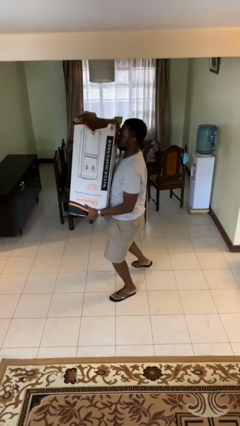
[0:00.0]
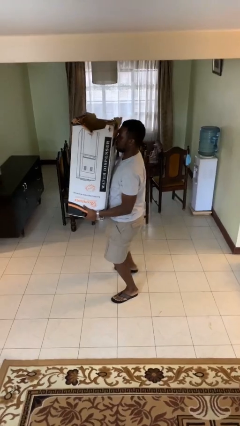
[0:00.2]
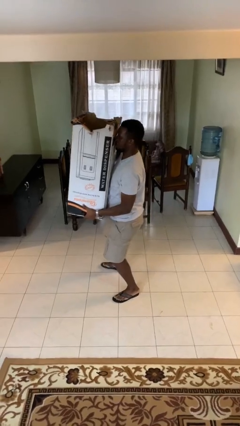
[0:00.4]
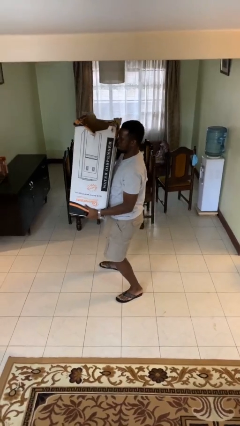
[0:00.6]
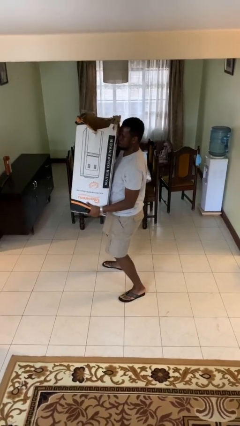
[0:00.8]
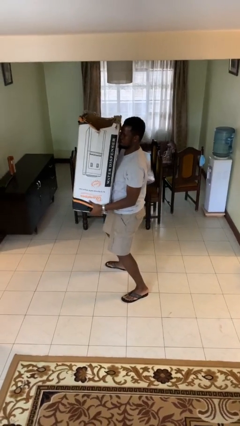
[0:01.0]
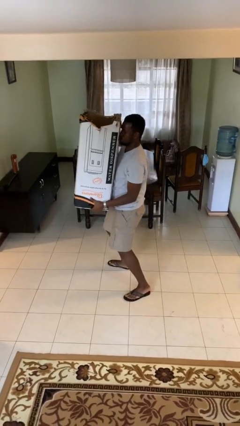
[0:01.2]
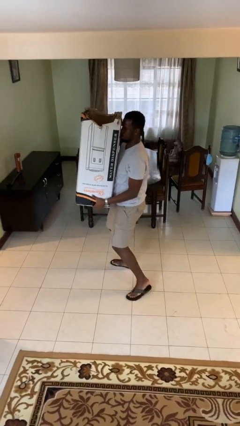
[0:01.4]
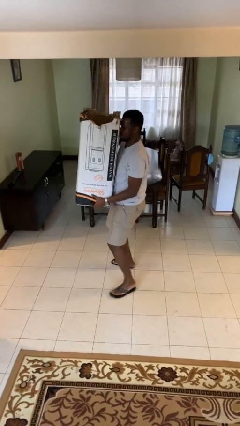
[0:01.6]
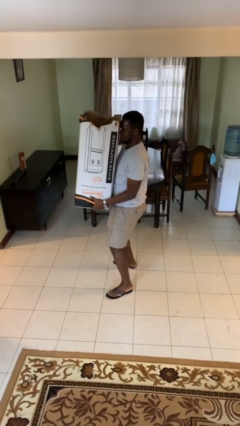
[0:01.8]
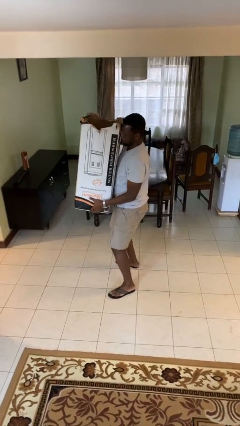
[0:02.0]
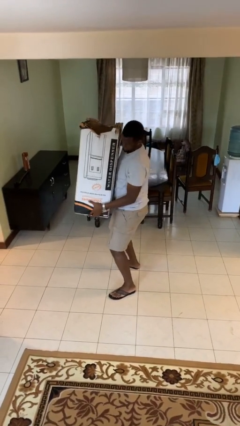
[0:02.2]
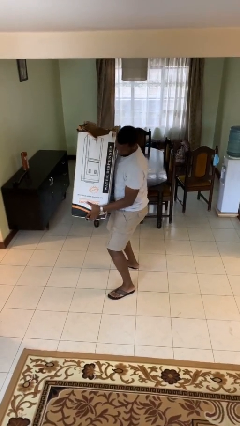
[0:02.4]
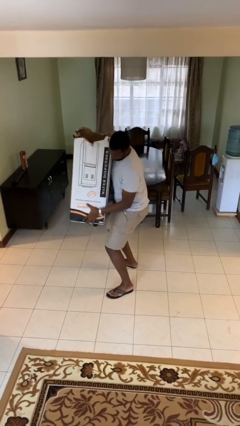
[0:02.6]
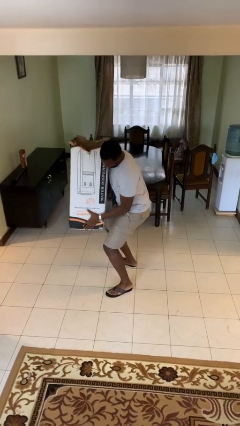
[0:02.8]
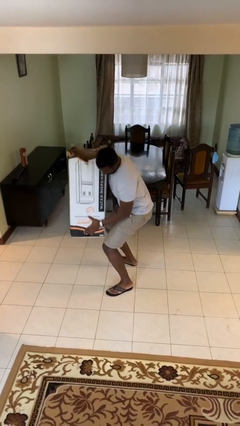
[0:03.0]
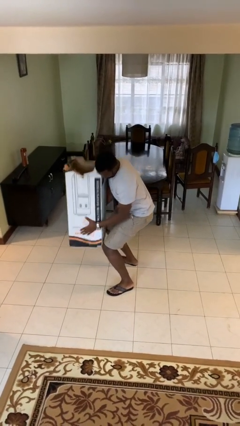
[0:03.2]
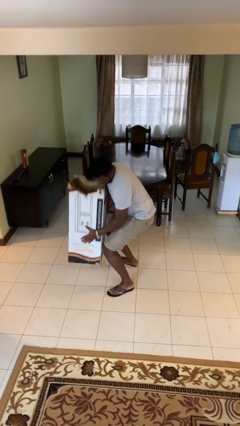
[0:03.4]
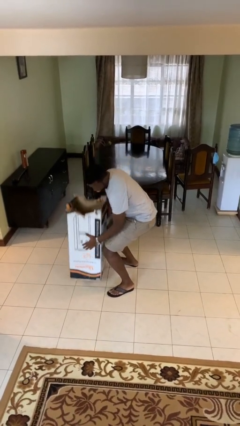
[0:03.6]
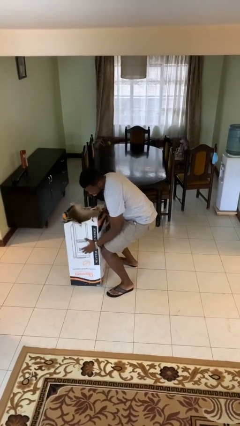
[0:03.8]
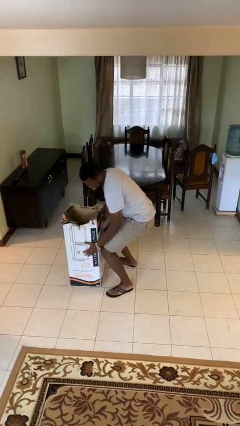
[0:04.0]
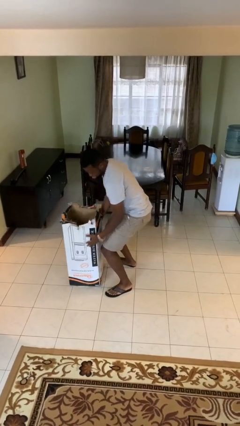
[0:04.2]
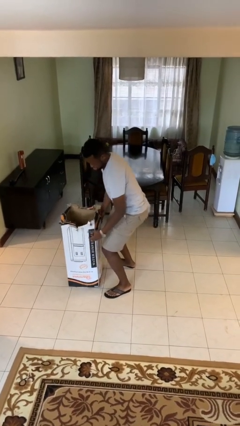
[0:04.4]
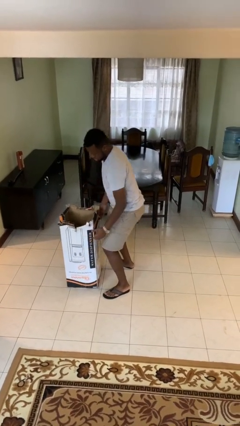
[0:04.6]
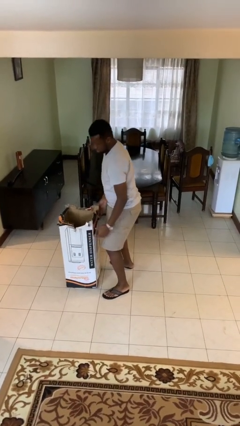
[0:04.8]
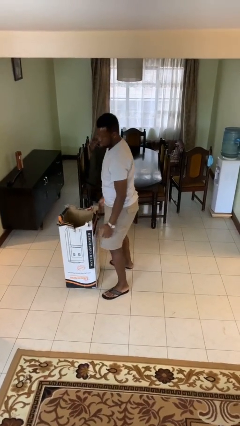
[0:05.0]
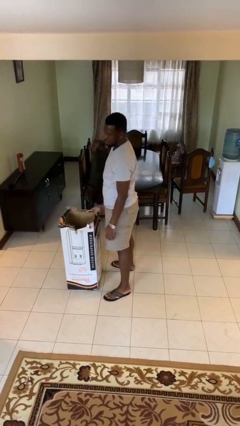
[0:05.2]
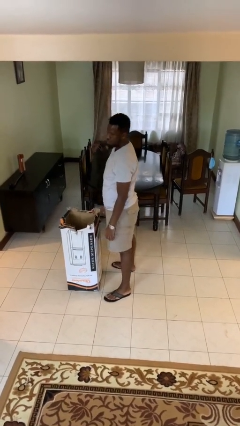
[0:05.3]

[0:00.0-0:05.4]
person puts down object on floor

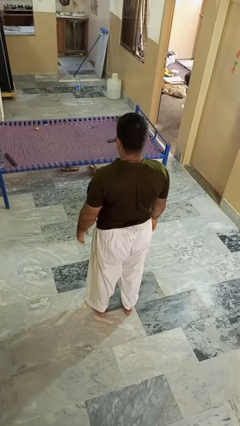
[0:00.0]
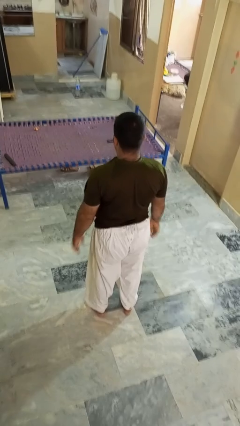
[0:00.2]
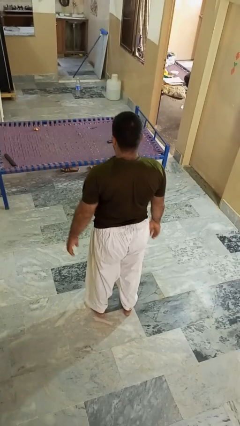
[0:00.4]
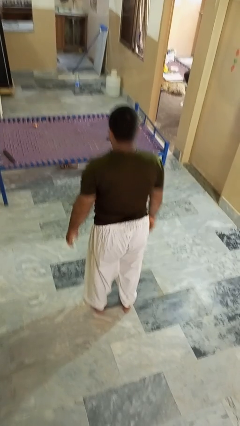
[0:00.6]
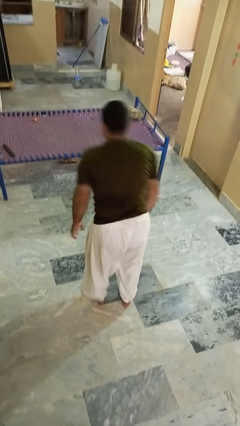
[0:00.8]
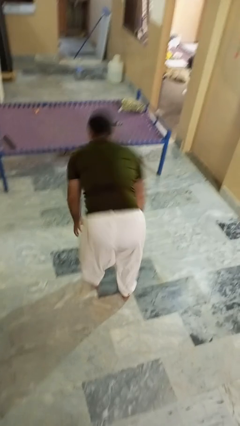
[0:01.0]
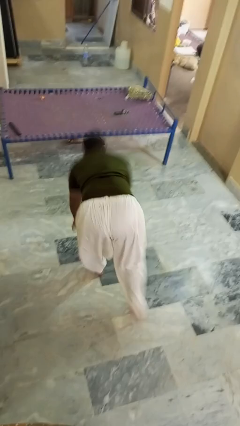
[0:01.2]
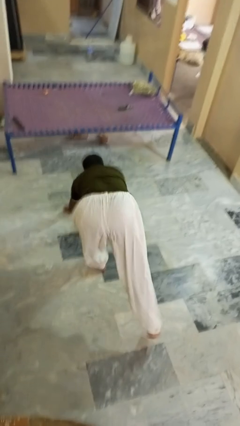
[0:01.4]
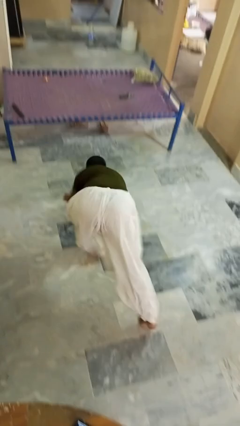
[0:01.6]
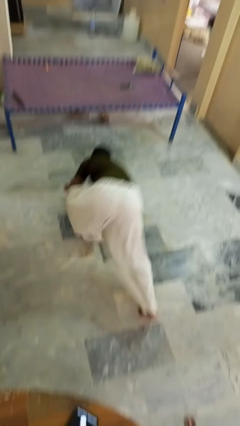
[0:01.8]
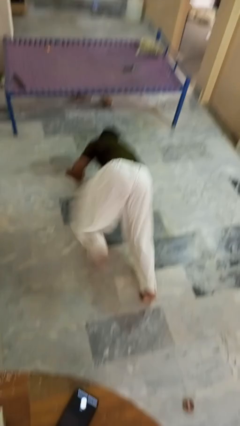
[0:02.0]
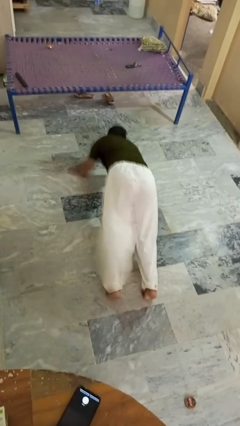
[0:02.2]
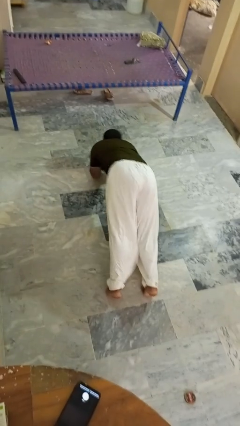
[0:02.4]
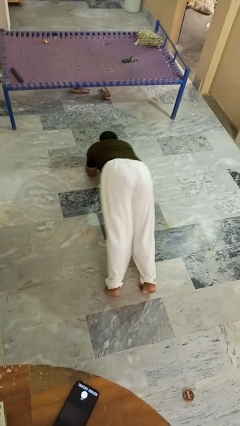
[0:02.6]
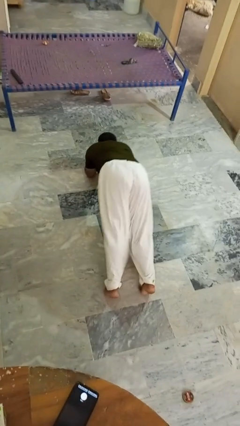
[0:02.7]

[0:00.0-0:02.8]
person exercises with plank

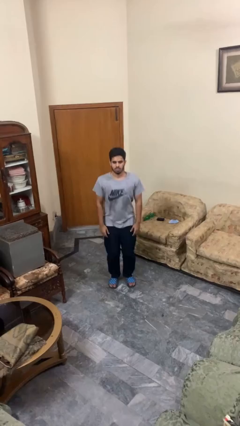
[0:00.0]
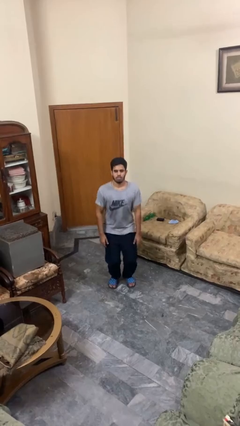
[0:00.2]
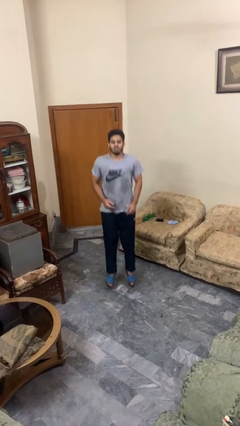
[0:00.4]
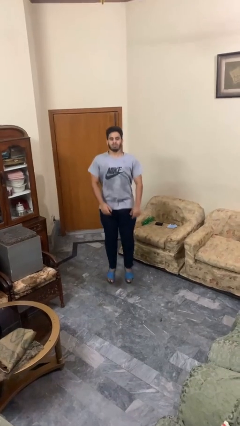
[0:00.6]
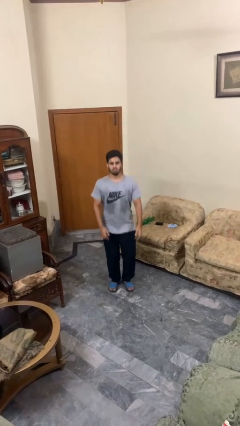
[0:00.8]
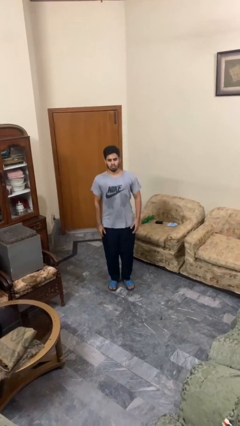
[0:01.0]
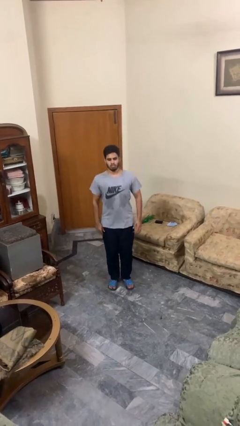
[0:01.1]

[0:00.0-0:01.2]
person jumps

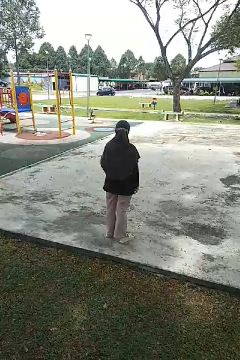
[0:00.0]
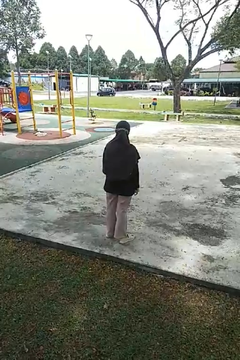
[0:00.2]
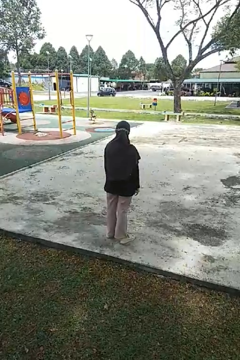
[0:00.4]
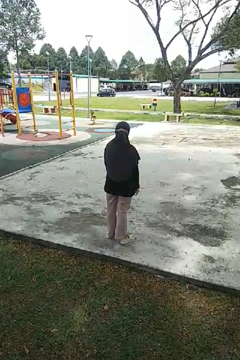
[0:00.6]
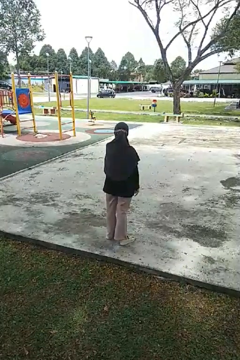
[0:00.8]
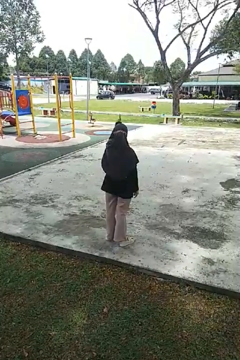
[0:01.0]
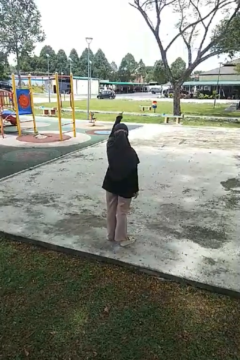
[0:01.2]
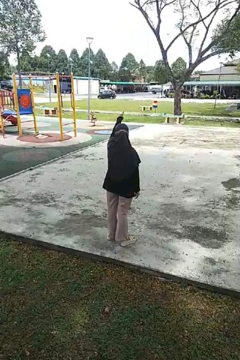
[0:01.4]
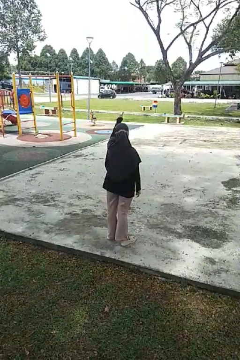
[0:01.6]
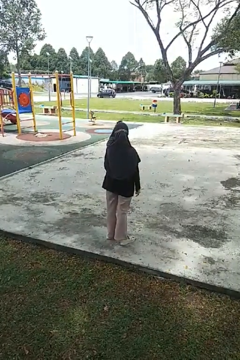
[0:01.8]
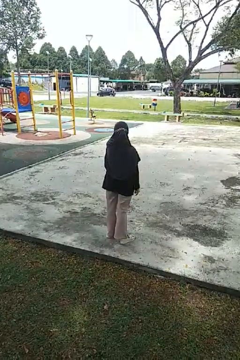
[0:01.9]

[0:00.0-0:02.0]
person points at person

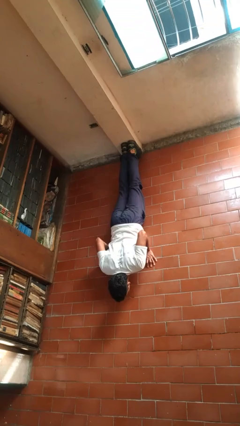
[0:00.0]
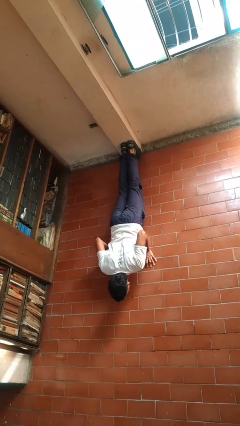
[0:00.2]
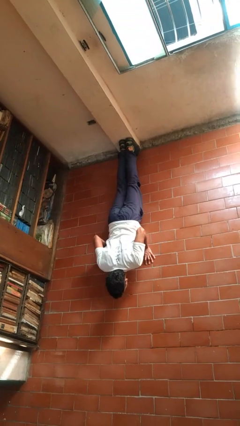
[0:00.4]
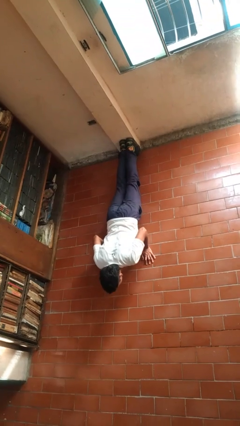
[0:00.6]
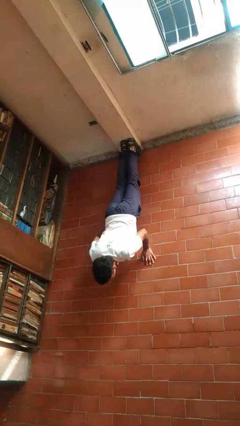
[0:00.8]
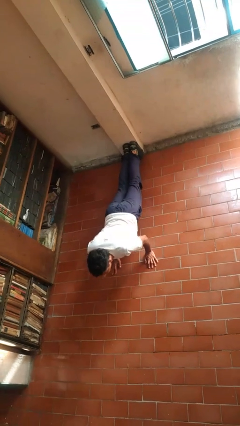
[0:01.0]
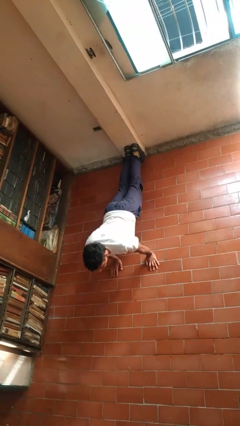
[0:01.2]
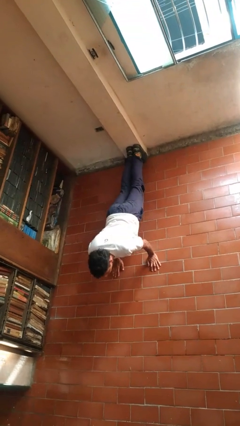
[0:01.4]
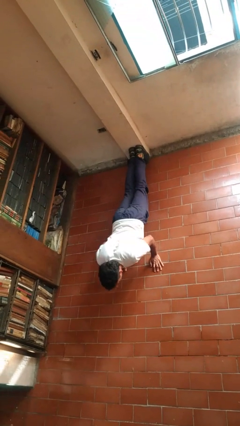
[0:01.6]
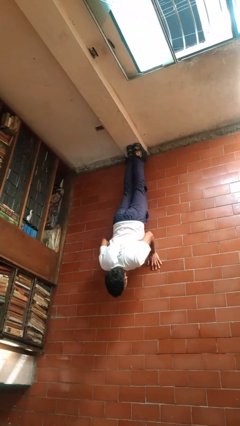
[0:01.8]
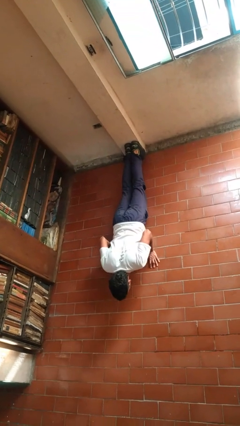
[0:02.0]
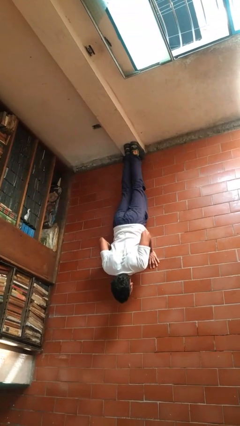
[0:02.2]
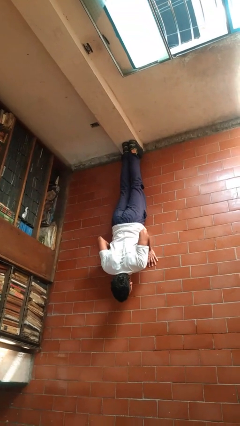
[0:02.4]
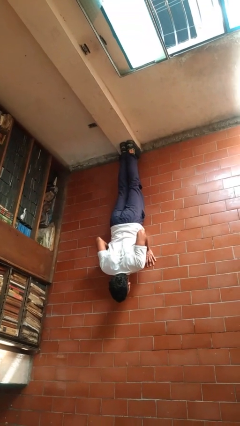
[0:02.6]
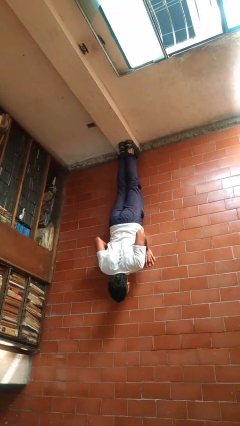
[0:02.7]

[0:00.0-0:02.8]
person exercises with pushup

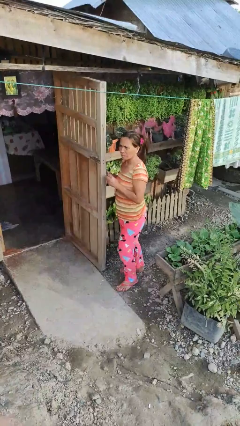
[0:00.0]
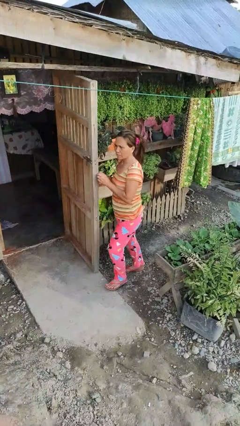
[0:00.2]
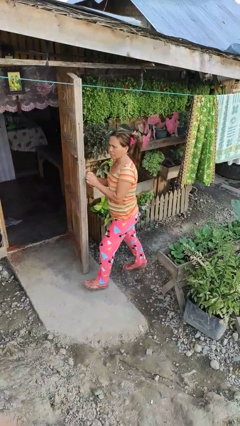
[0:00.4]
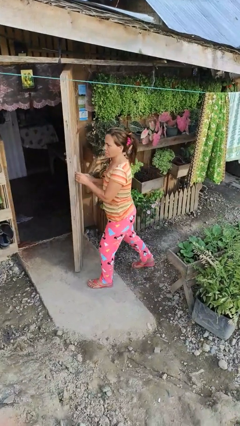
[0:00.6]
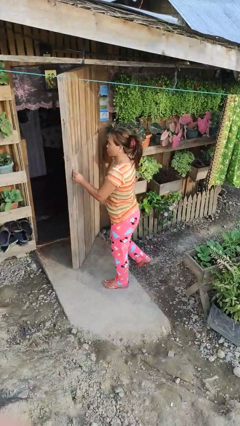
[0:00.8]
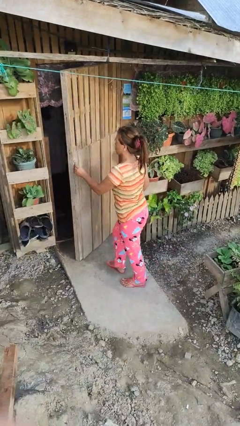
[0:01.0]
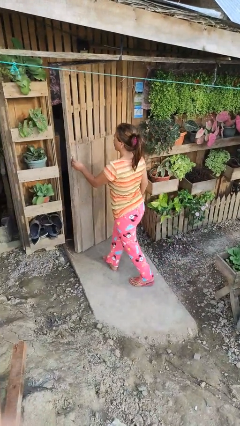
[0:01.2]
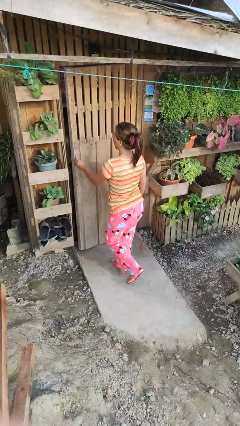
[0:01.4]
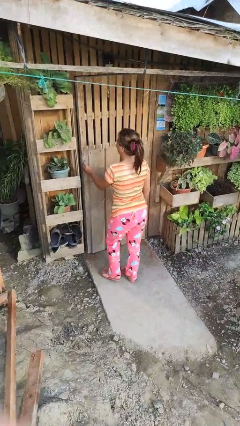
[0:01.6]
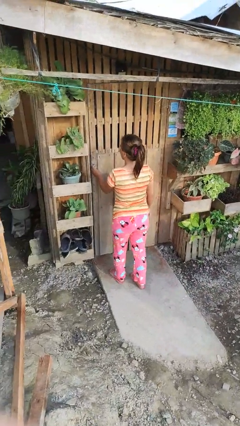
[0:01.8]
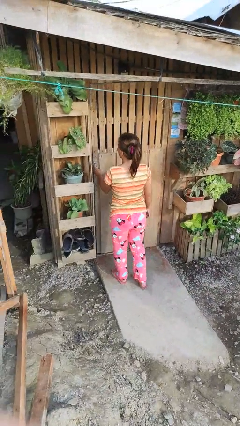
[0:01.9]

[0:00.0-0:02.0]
person closes facility door

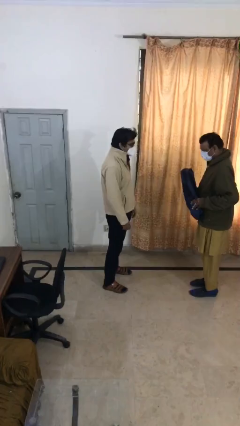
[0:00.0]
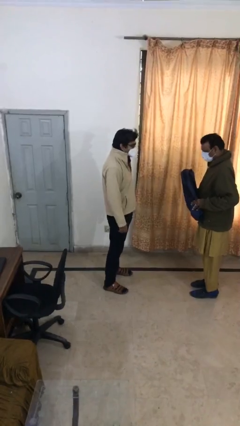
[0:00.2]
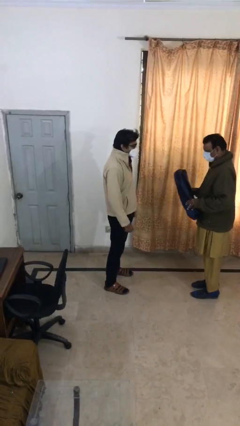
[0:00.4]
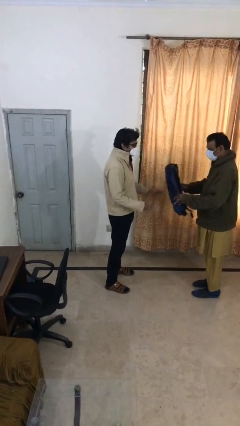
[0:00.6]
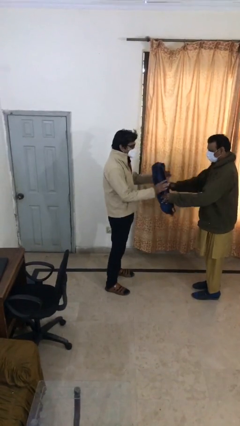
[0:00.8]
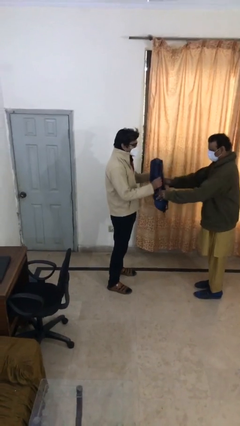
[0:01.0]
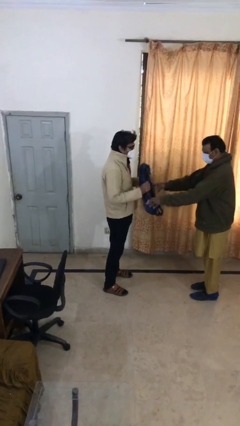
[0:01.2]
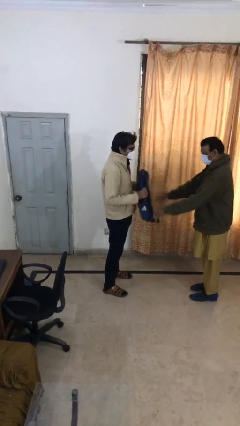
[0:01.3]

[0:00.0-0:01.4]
person transfers object to person
